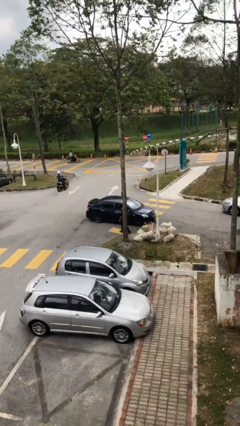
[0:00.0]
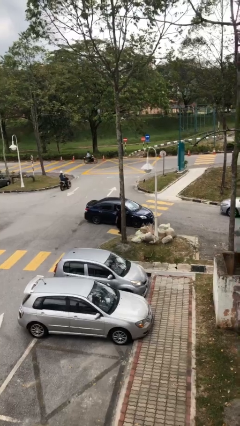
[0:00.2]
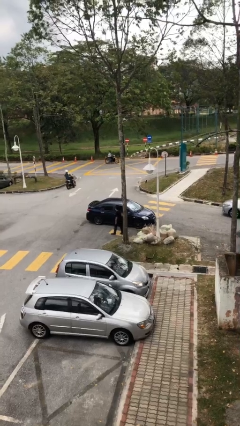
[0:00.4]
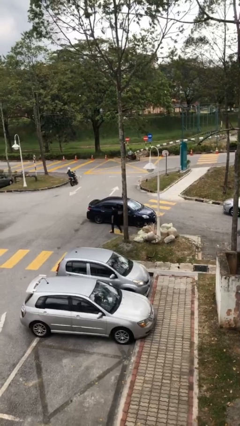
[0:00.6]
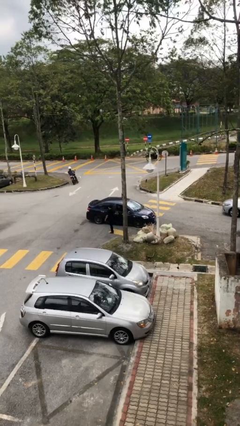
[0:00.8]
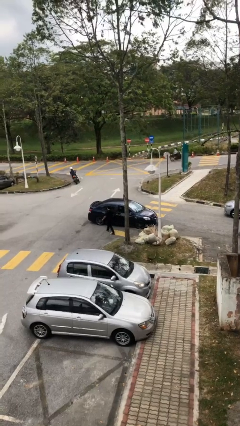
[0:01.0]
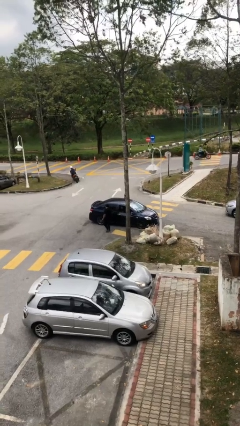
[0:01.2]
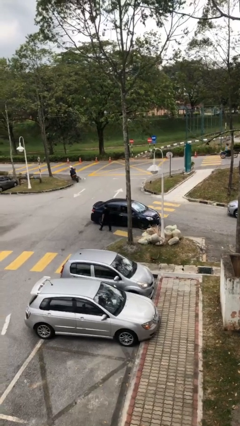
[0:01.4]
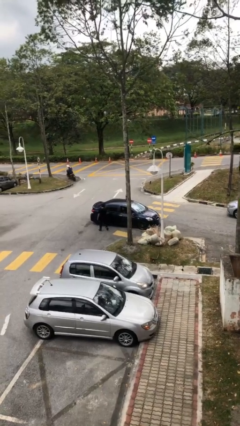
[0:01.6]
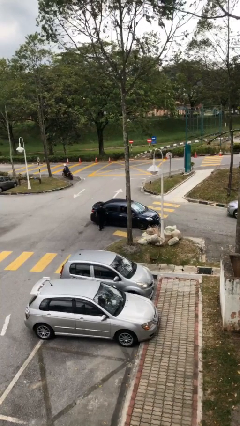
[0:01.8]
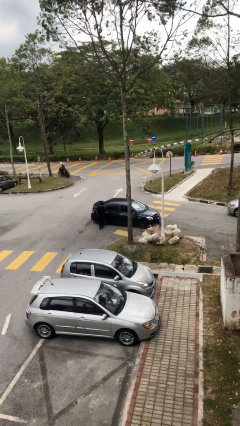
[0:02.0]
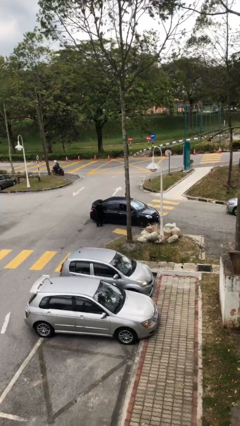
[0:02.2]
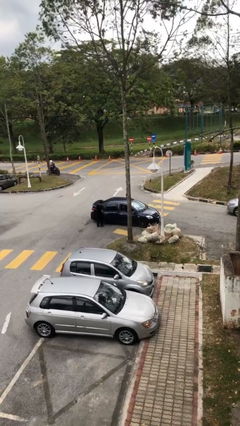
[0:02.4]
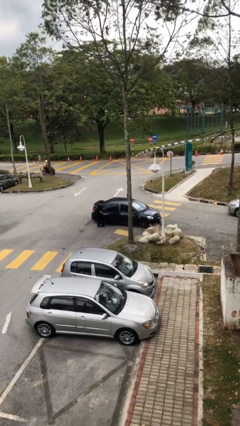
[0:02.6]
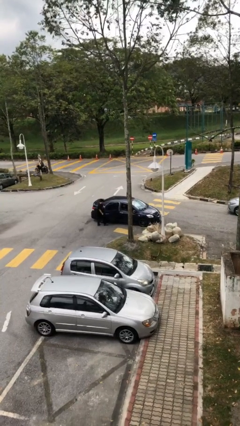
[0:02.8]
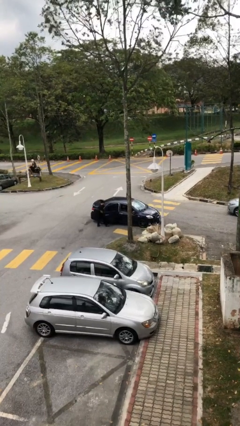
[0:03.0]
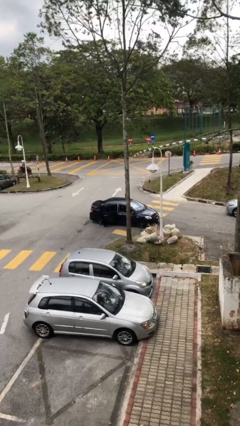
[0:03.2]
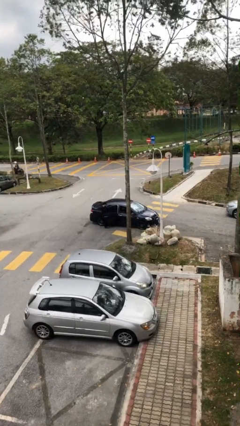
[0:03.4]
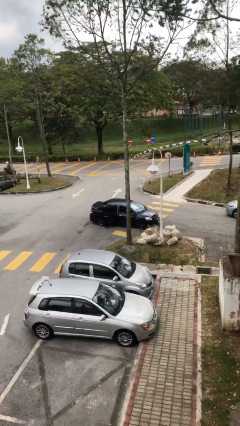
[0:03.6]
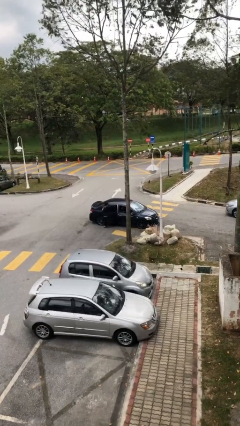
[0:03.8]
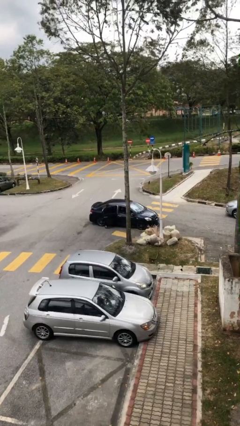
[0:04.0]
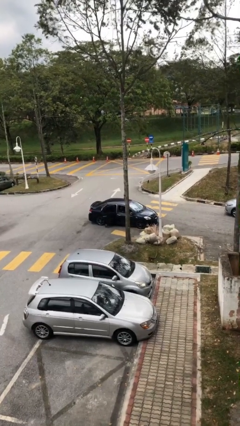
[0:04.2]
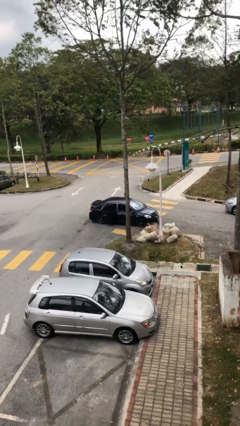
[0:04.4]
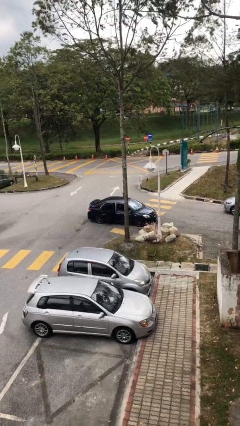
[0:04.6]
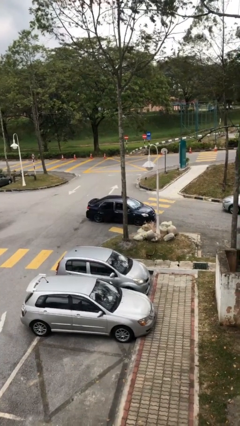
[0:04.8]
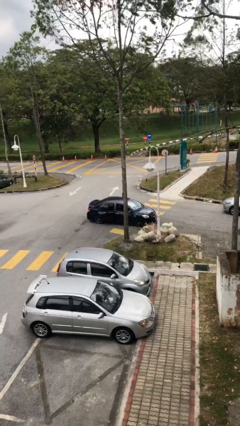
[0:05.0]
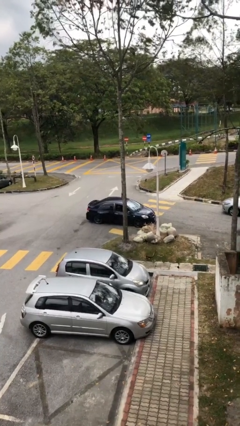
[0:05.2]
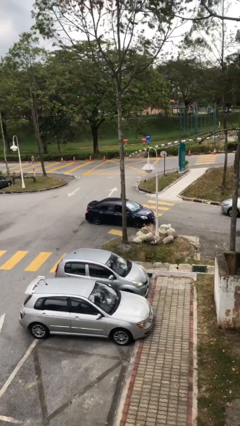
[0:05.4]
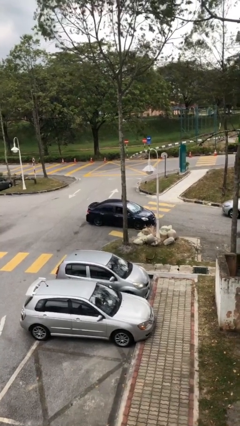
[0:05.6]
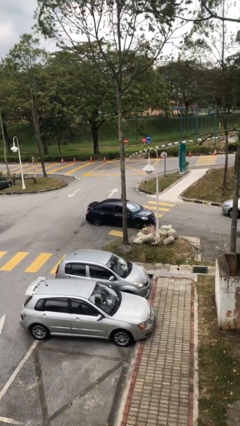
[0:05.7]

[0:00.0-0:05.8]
car picks up person

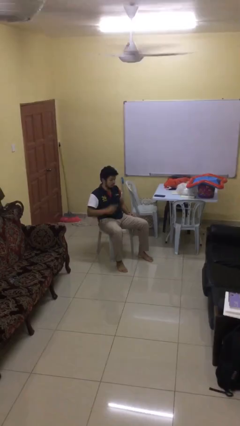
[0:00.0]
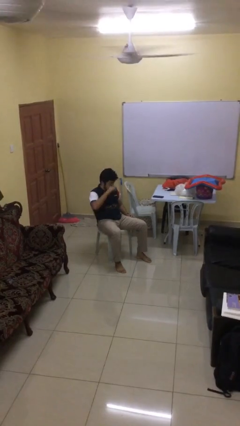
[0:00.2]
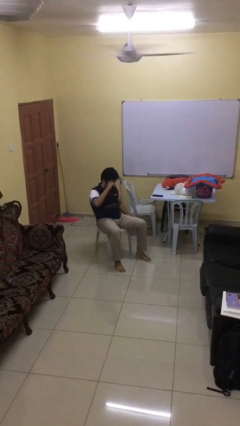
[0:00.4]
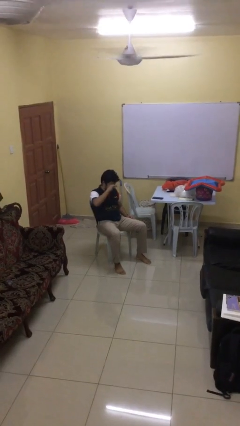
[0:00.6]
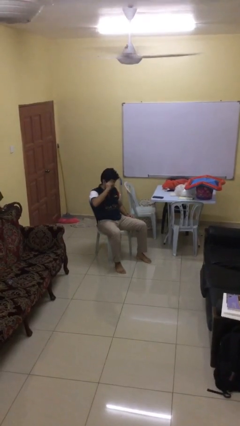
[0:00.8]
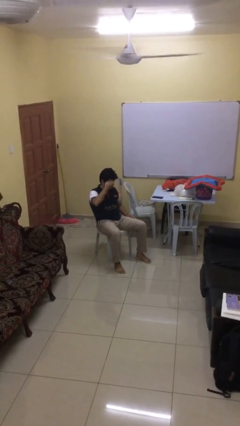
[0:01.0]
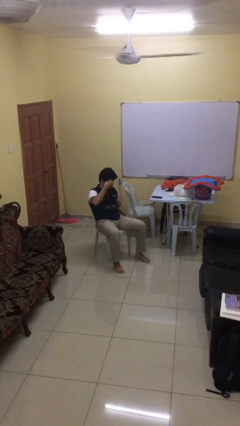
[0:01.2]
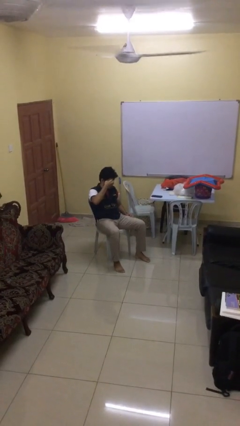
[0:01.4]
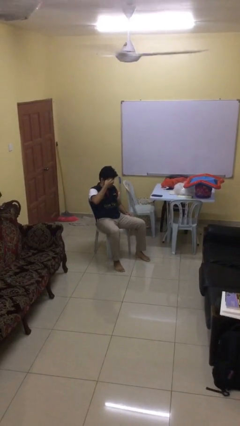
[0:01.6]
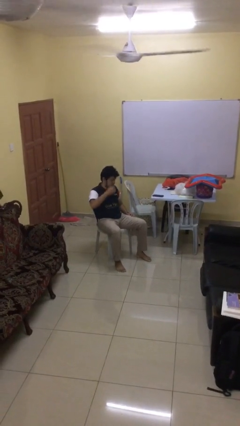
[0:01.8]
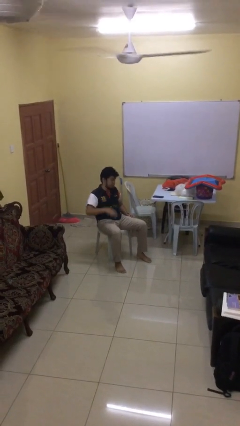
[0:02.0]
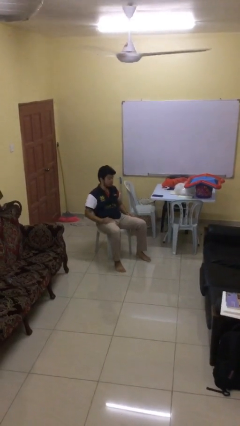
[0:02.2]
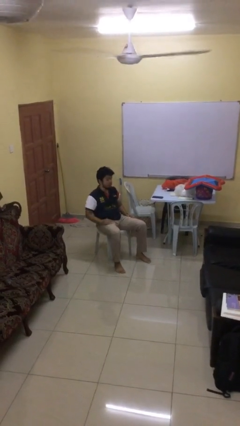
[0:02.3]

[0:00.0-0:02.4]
person scratches face

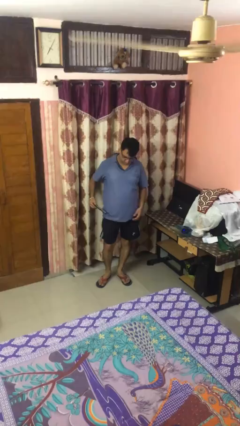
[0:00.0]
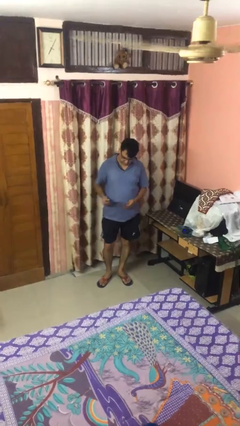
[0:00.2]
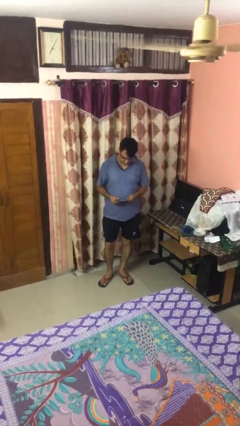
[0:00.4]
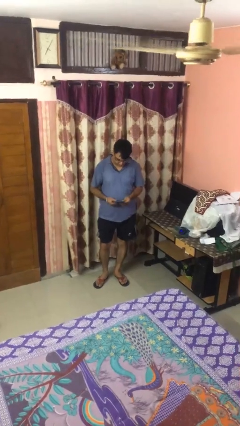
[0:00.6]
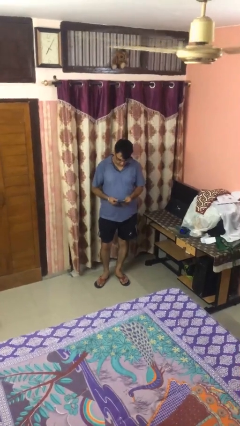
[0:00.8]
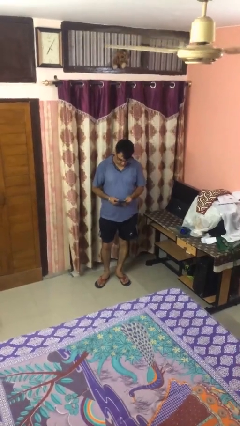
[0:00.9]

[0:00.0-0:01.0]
person takes phone from pocket

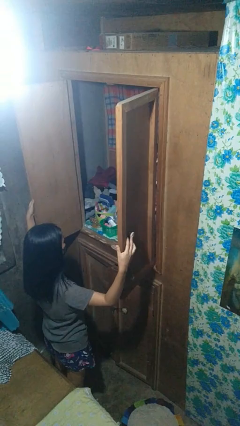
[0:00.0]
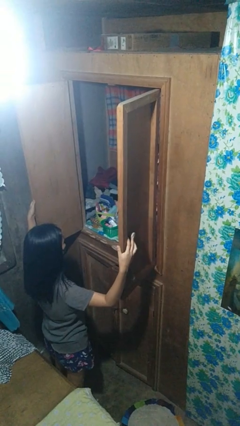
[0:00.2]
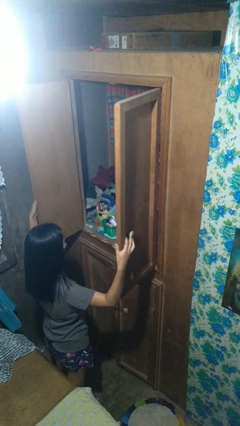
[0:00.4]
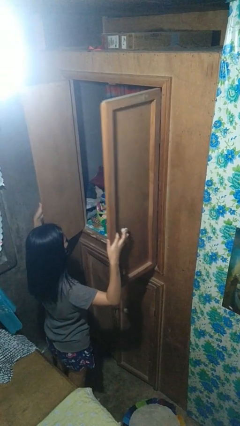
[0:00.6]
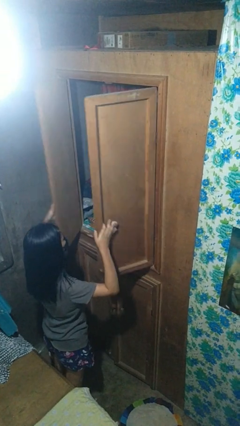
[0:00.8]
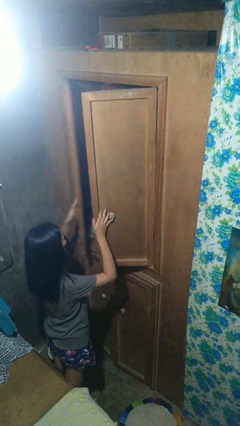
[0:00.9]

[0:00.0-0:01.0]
person closes closet door

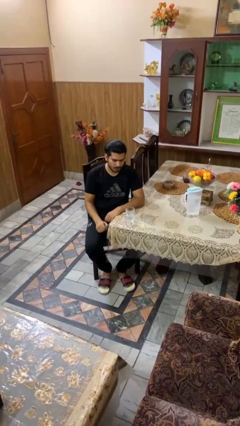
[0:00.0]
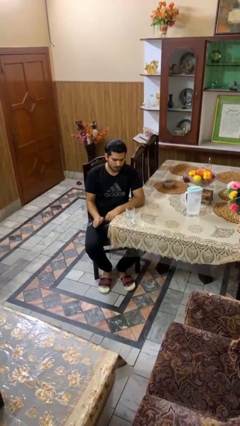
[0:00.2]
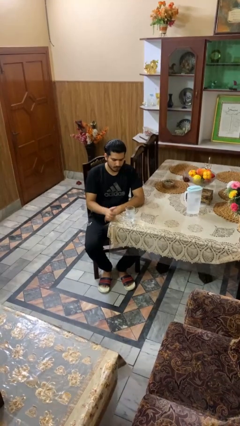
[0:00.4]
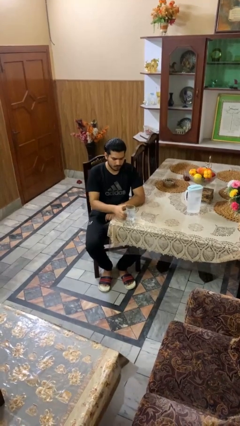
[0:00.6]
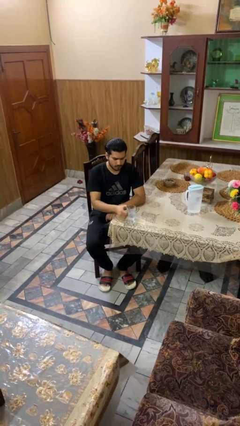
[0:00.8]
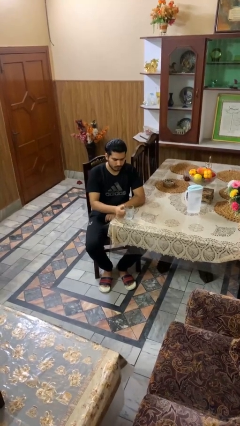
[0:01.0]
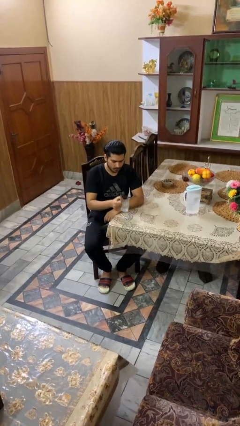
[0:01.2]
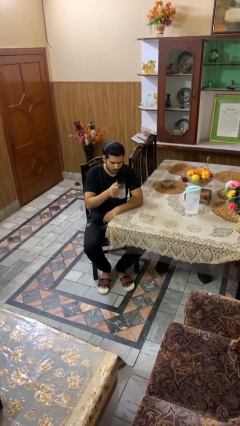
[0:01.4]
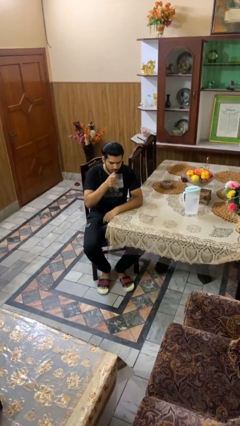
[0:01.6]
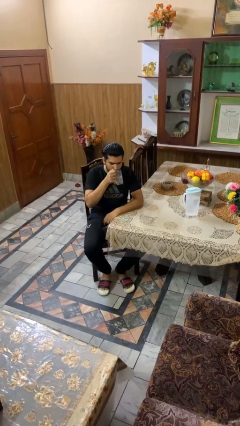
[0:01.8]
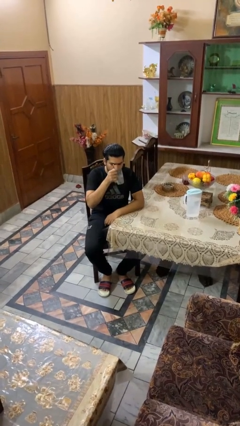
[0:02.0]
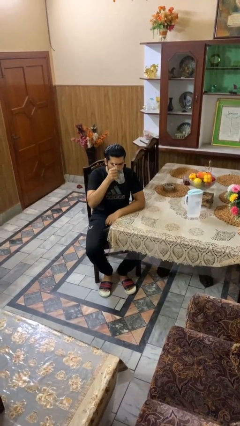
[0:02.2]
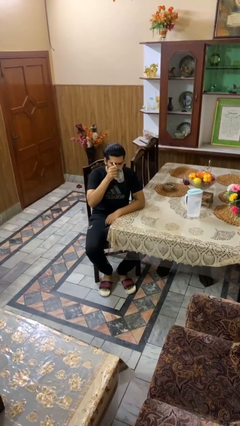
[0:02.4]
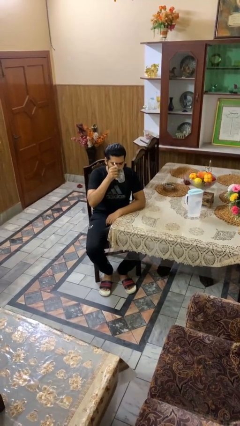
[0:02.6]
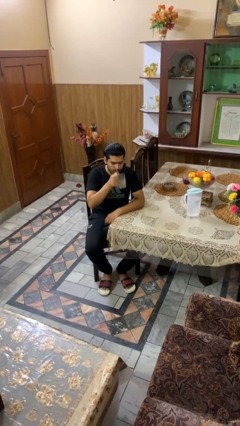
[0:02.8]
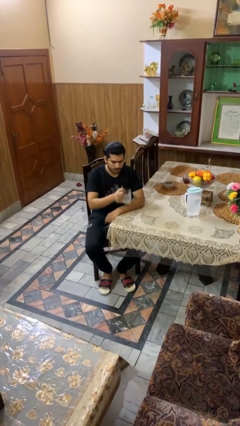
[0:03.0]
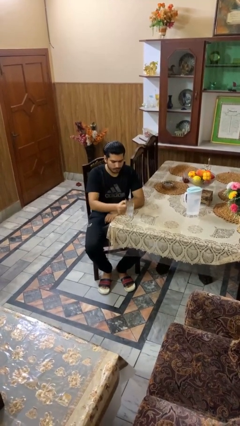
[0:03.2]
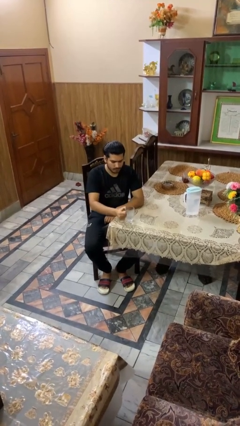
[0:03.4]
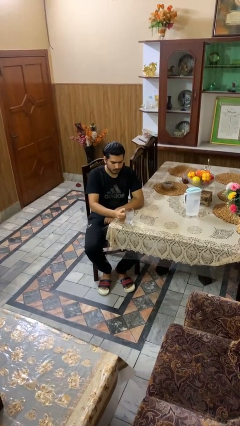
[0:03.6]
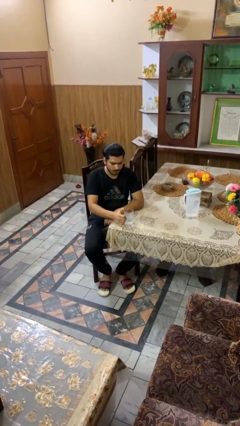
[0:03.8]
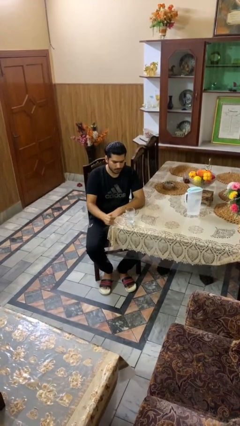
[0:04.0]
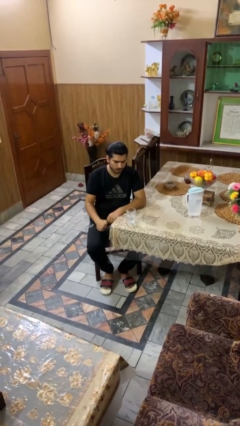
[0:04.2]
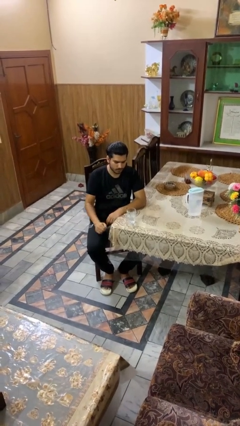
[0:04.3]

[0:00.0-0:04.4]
person drinks from mug

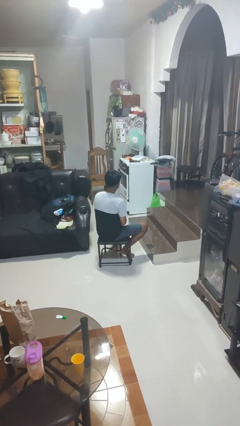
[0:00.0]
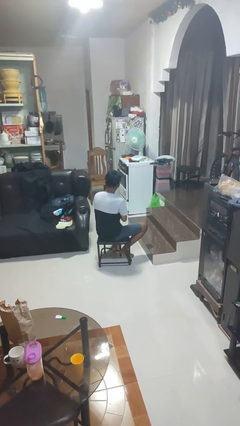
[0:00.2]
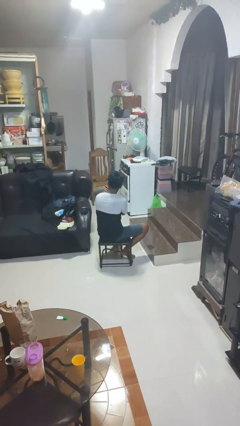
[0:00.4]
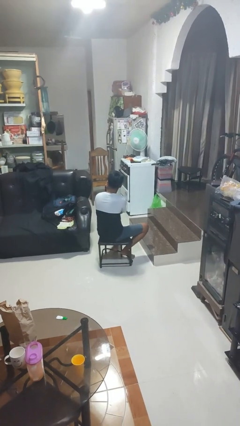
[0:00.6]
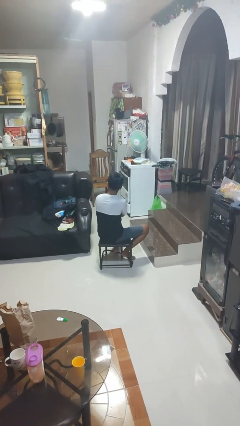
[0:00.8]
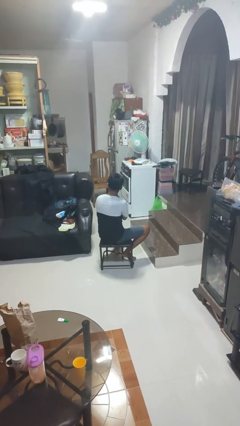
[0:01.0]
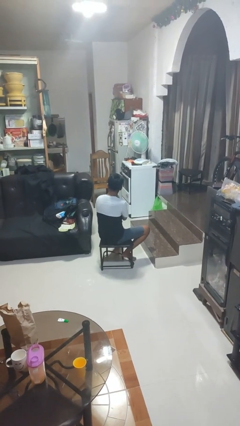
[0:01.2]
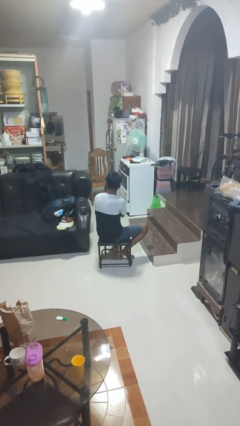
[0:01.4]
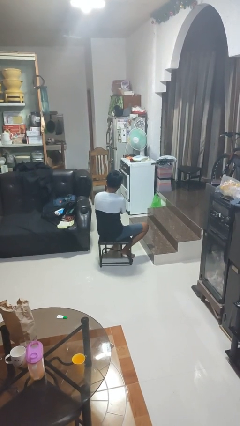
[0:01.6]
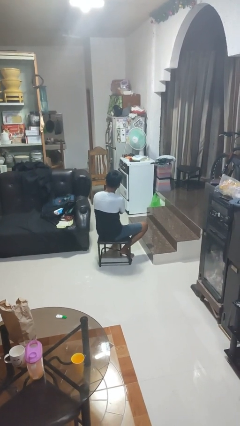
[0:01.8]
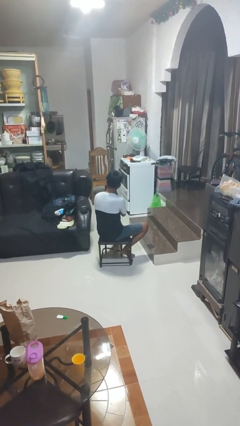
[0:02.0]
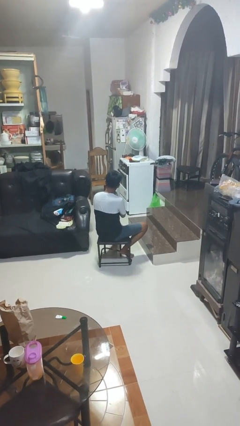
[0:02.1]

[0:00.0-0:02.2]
person strokes chin

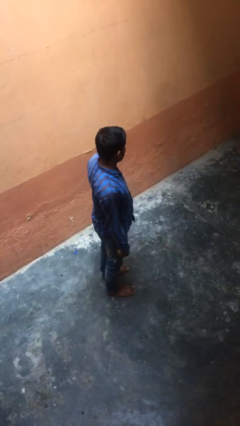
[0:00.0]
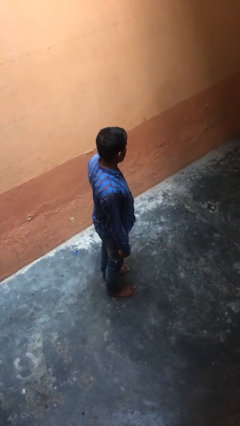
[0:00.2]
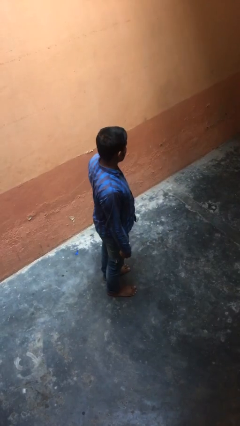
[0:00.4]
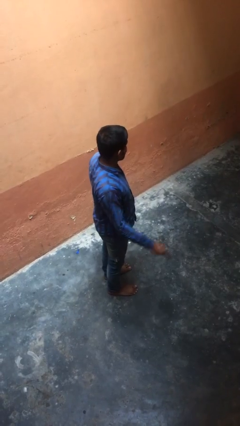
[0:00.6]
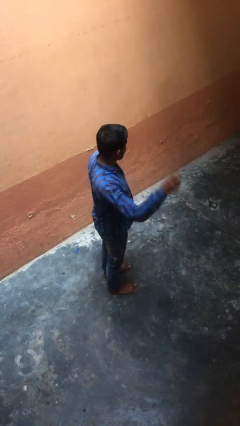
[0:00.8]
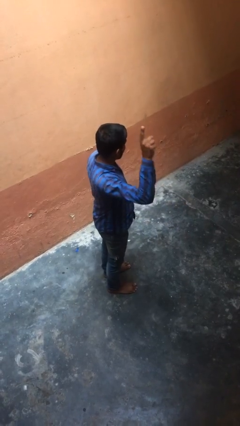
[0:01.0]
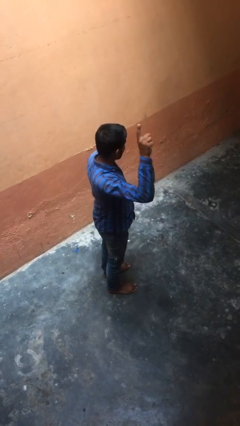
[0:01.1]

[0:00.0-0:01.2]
person gestures number one
